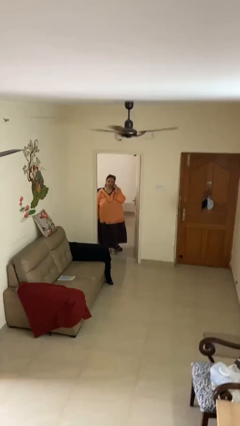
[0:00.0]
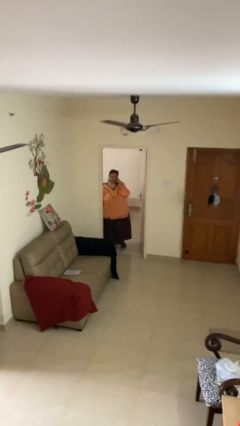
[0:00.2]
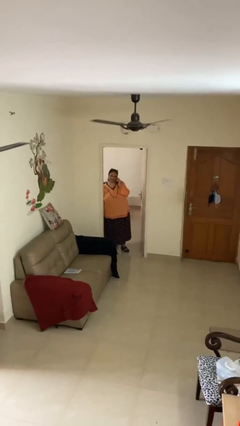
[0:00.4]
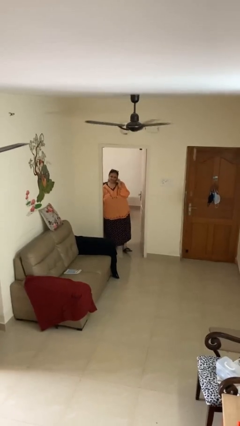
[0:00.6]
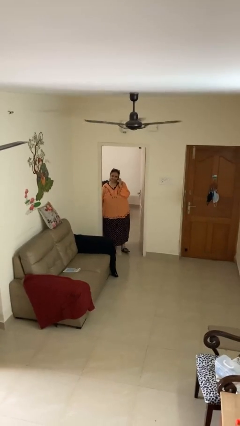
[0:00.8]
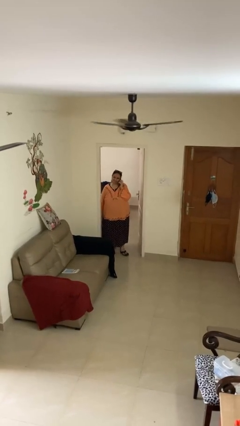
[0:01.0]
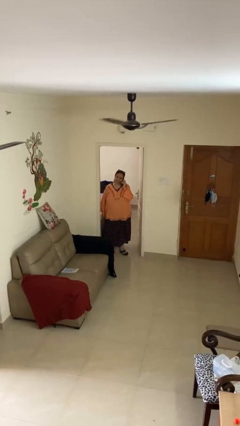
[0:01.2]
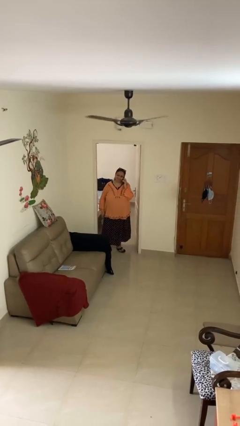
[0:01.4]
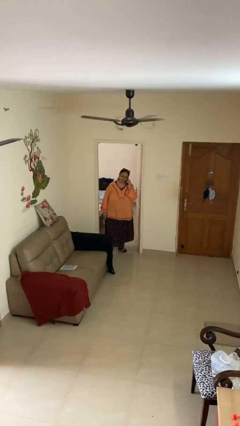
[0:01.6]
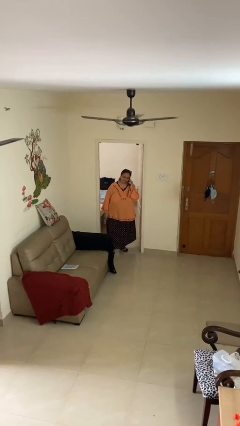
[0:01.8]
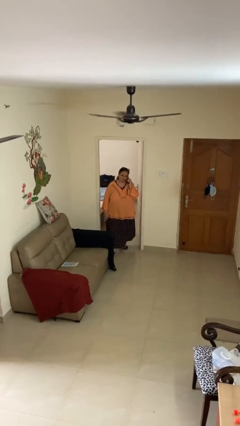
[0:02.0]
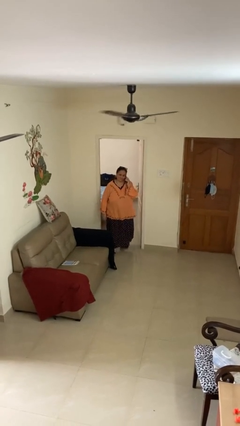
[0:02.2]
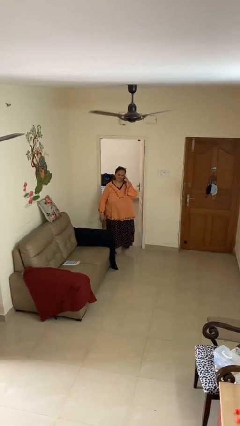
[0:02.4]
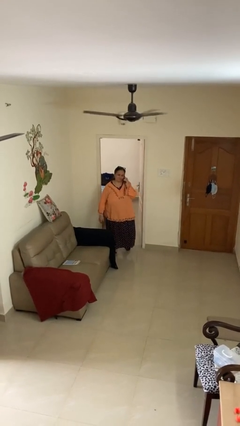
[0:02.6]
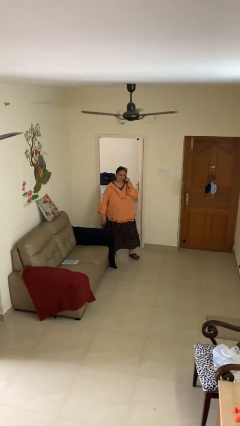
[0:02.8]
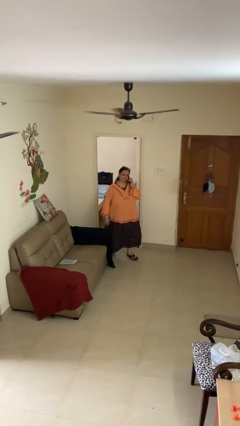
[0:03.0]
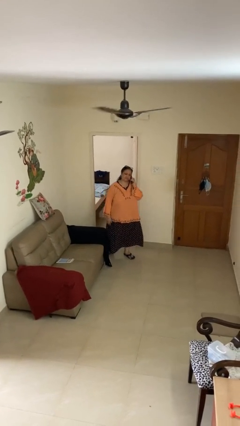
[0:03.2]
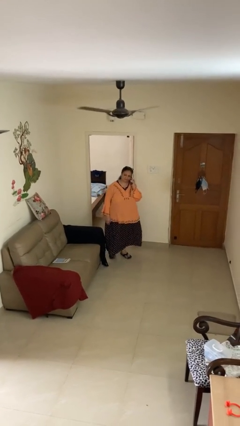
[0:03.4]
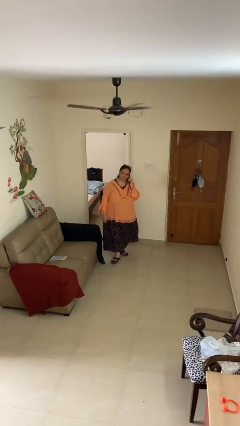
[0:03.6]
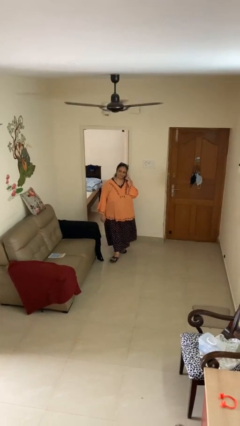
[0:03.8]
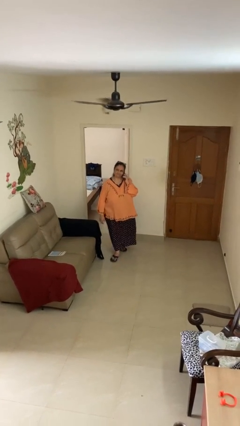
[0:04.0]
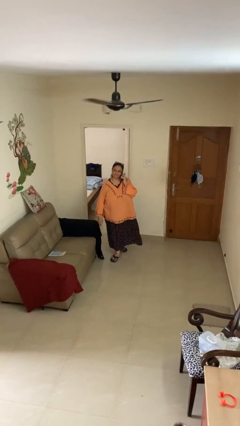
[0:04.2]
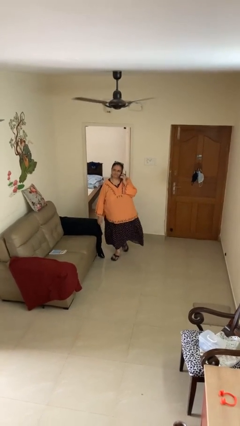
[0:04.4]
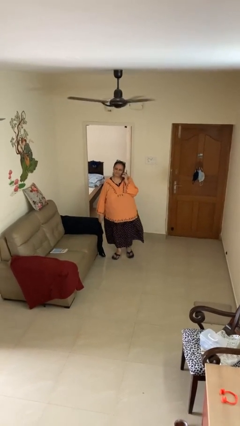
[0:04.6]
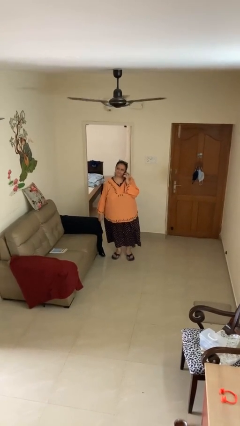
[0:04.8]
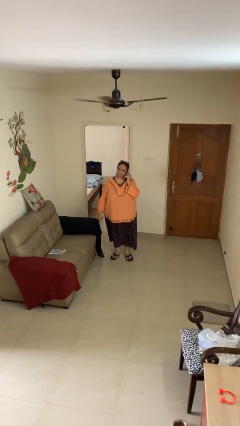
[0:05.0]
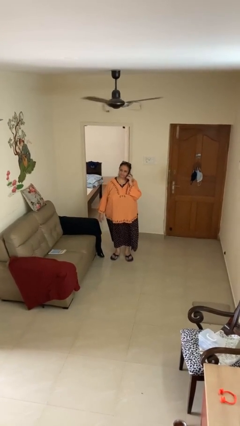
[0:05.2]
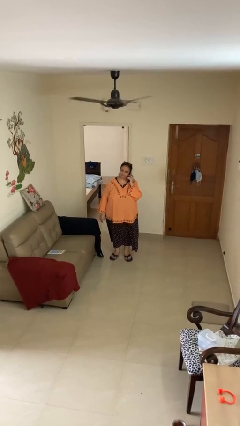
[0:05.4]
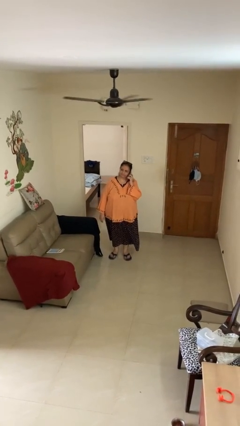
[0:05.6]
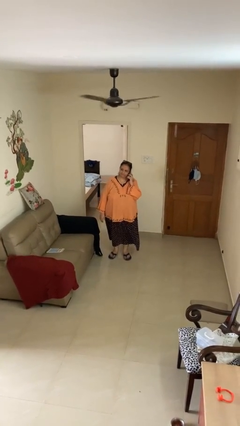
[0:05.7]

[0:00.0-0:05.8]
person enters scene through structure

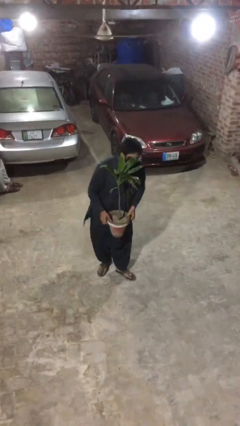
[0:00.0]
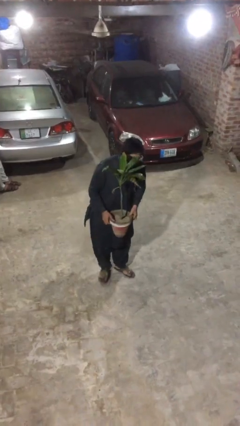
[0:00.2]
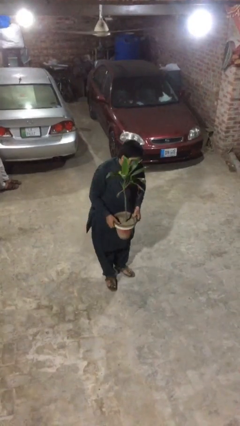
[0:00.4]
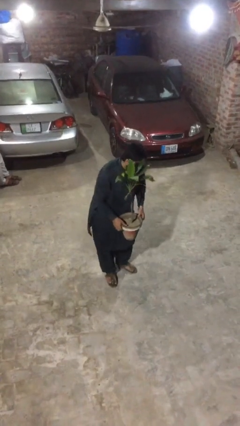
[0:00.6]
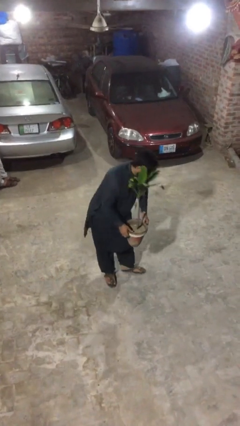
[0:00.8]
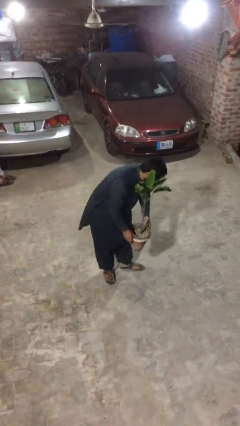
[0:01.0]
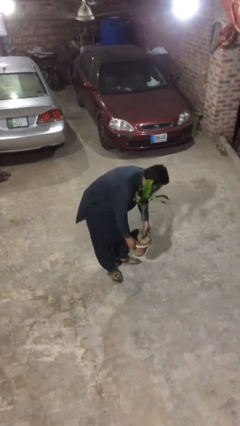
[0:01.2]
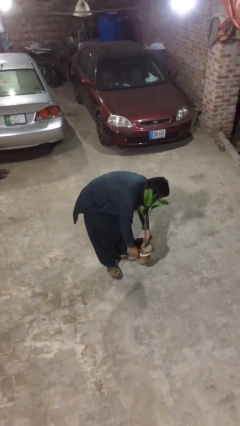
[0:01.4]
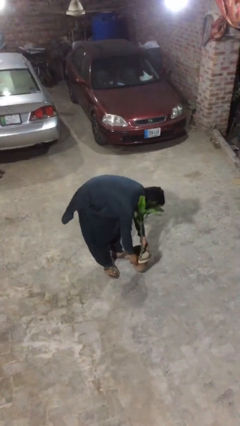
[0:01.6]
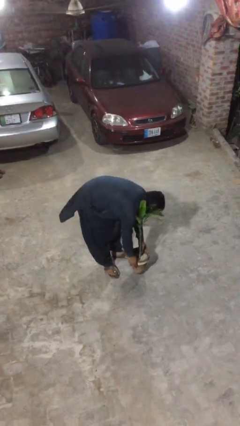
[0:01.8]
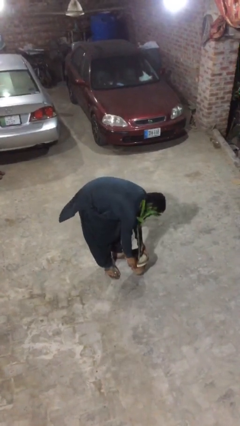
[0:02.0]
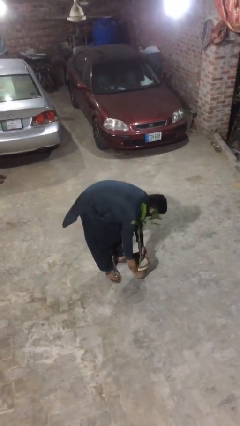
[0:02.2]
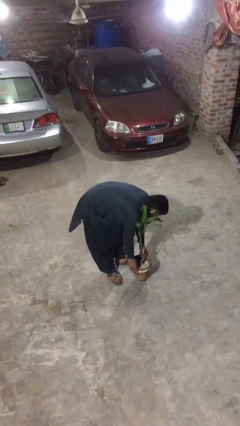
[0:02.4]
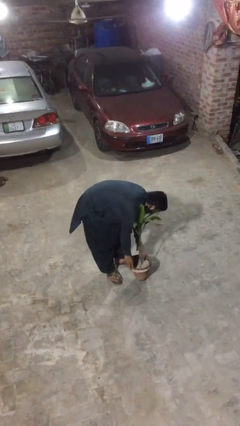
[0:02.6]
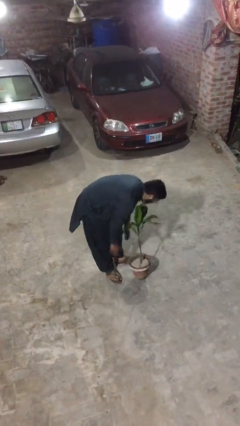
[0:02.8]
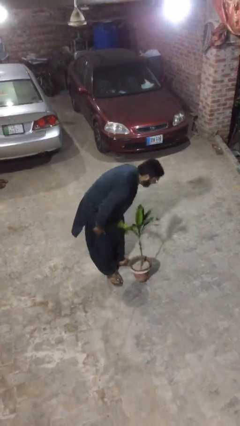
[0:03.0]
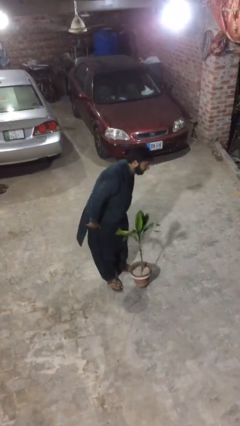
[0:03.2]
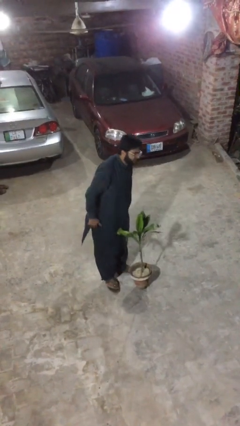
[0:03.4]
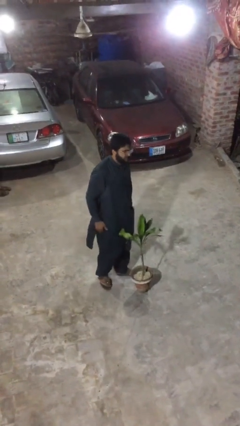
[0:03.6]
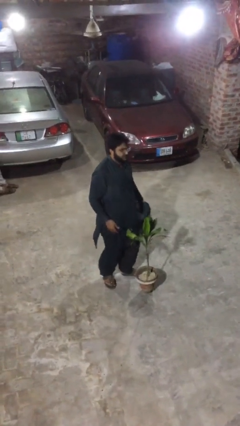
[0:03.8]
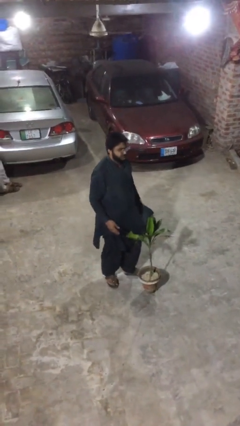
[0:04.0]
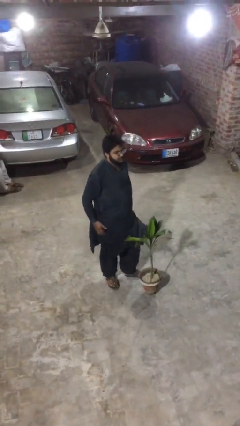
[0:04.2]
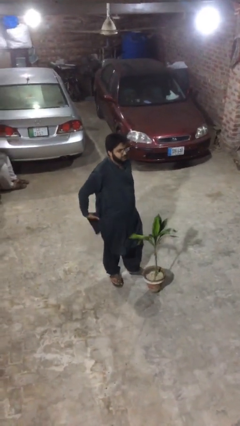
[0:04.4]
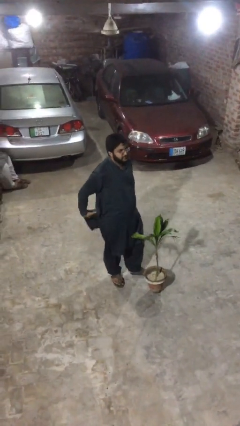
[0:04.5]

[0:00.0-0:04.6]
person puts down object on floor

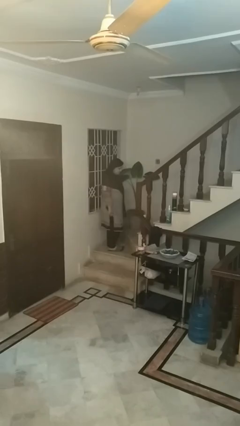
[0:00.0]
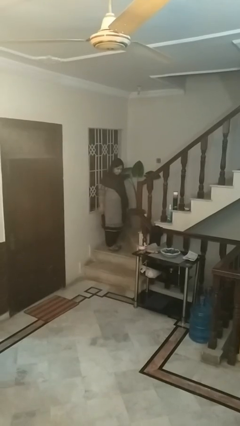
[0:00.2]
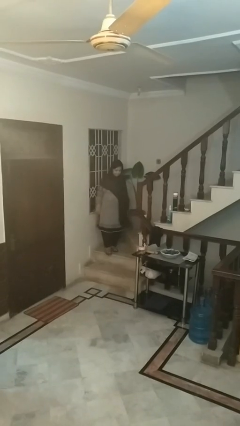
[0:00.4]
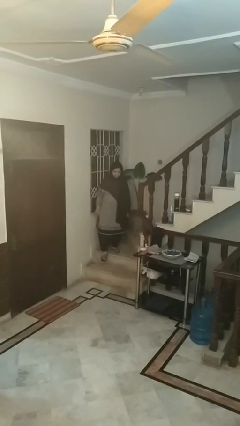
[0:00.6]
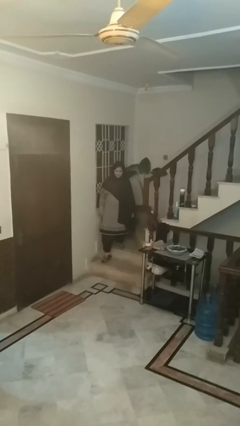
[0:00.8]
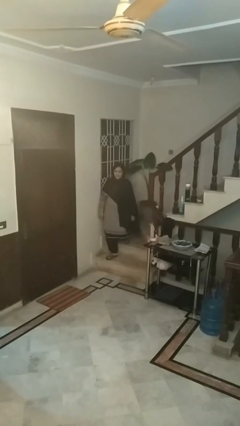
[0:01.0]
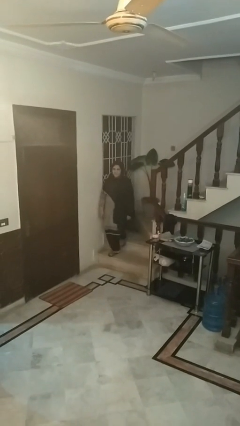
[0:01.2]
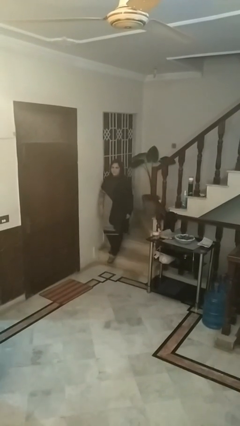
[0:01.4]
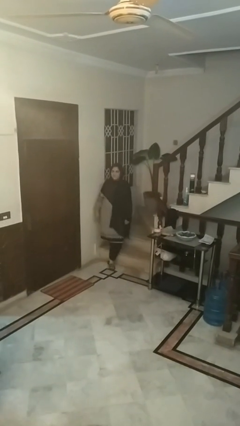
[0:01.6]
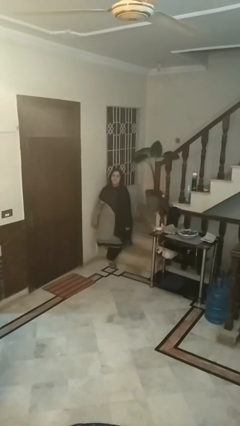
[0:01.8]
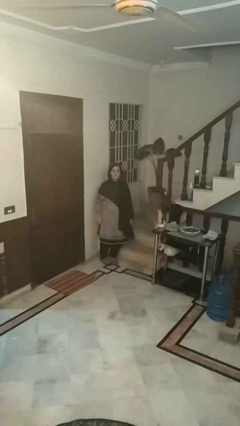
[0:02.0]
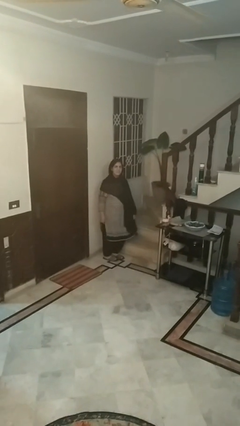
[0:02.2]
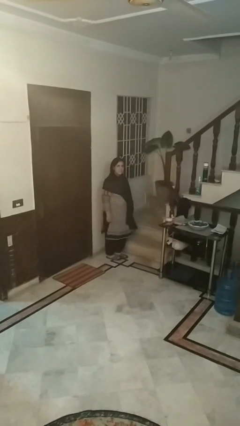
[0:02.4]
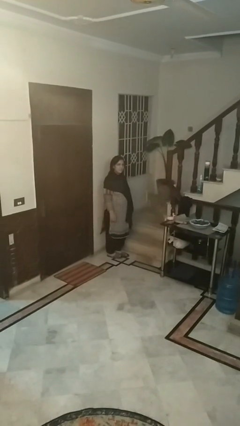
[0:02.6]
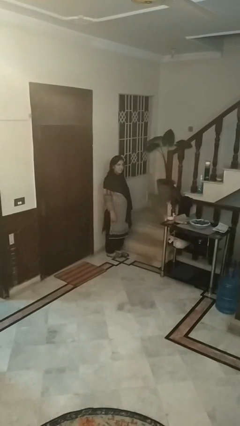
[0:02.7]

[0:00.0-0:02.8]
person climbs down stairs

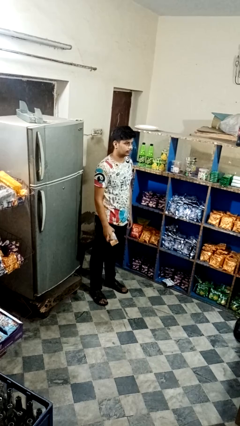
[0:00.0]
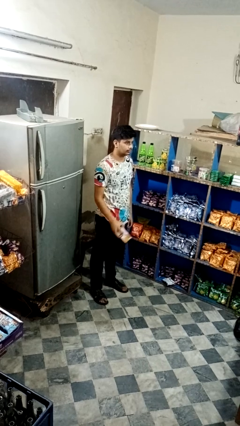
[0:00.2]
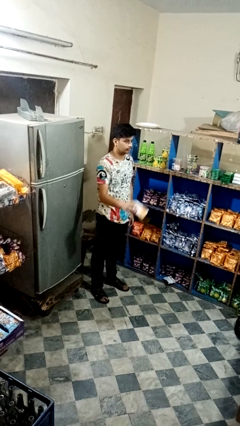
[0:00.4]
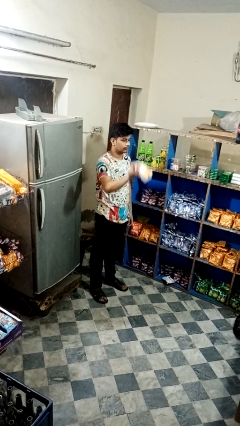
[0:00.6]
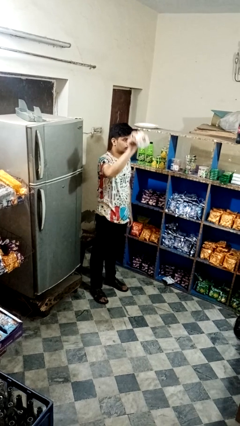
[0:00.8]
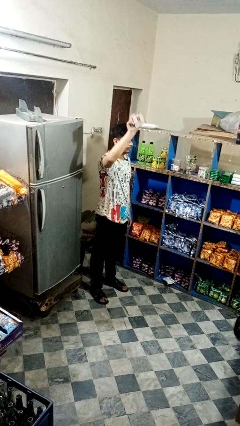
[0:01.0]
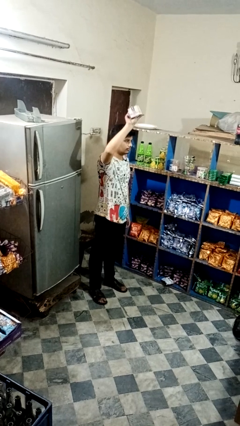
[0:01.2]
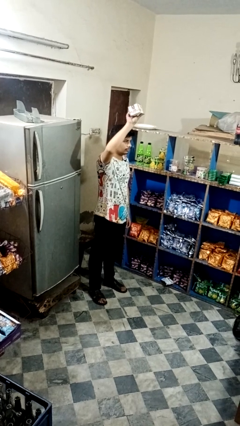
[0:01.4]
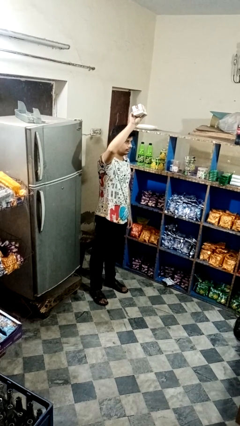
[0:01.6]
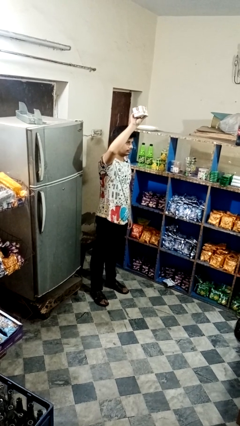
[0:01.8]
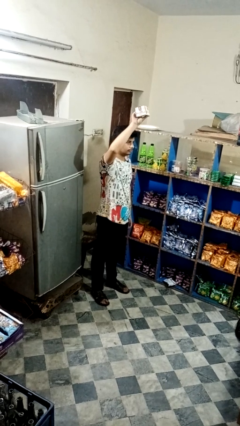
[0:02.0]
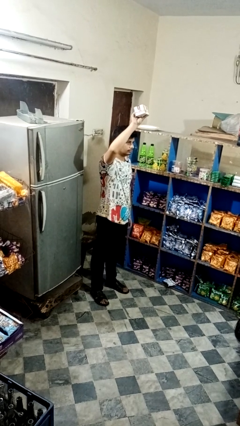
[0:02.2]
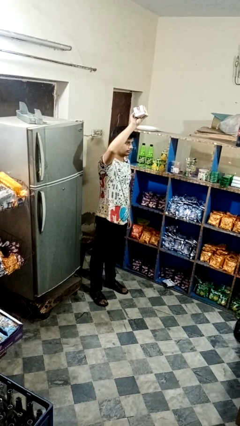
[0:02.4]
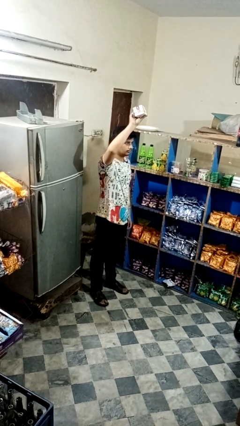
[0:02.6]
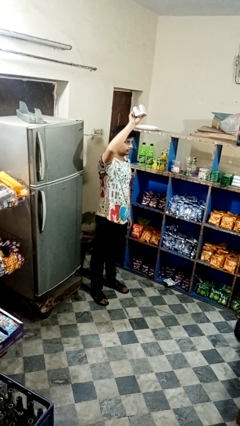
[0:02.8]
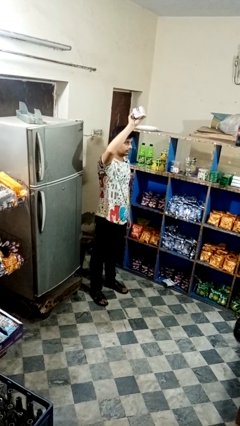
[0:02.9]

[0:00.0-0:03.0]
person holds object above head

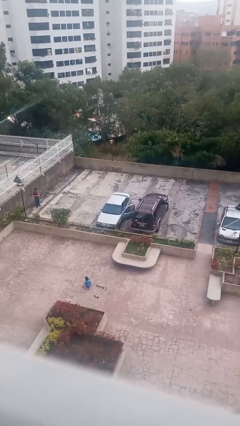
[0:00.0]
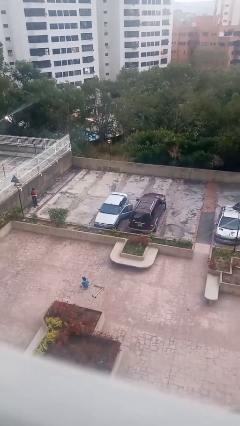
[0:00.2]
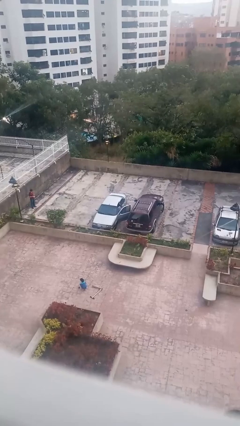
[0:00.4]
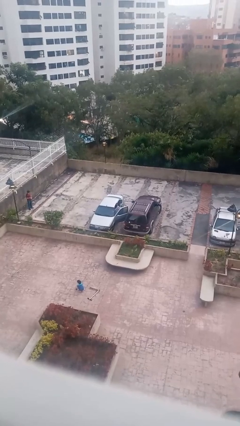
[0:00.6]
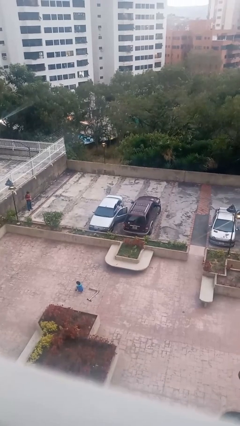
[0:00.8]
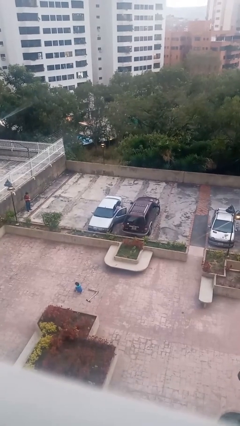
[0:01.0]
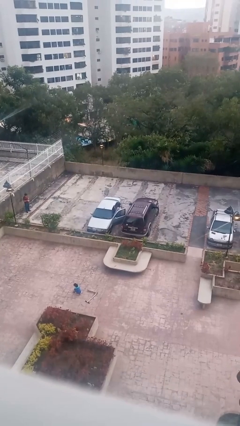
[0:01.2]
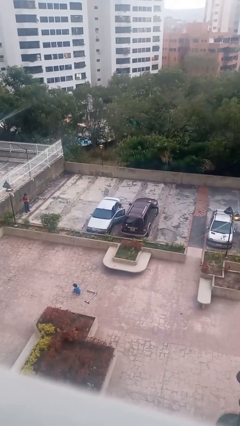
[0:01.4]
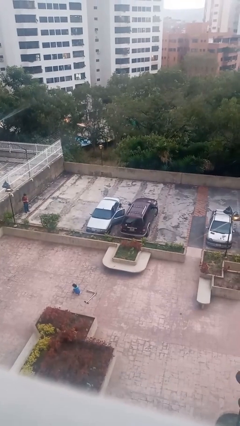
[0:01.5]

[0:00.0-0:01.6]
person exits car

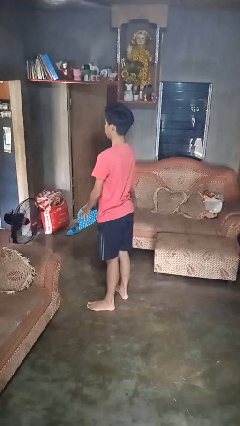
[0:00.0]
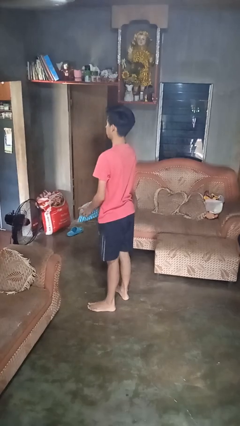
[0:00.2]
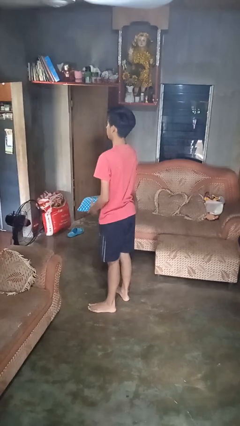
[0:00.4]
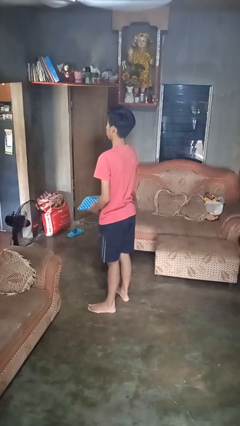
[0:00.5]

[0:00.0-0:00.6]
person catches dropped object
